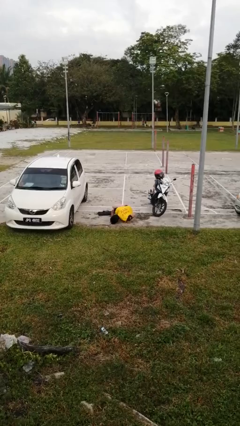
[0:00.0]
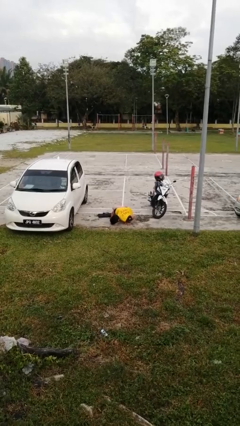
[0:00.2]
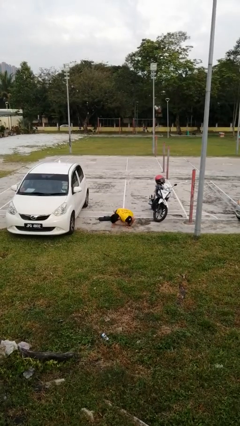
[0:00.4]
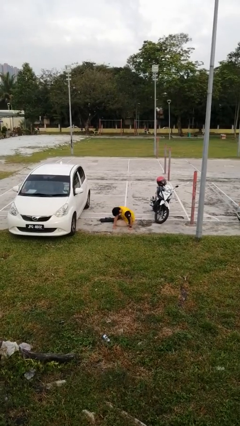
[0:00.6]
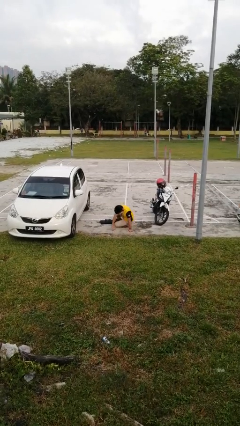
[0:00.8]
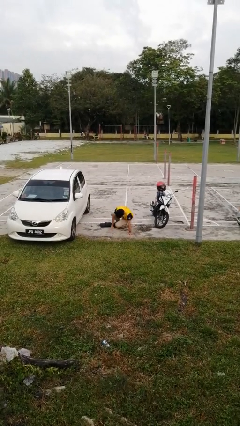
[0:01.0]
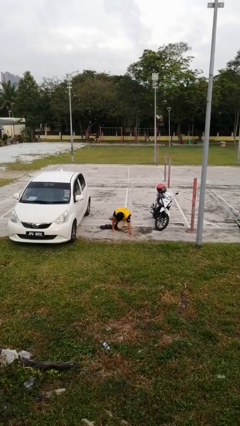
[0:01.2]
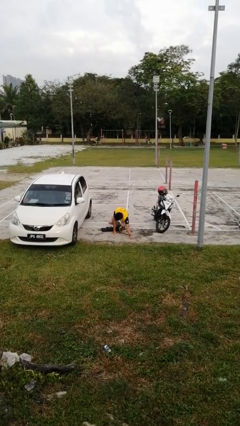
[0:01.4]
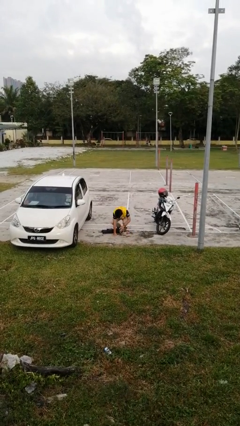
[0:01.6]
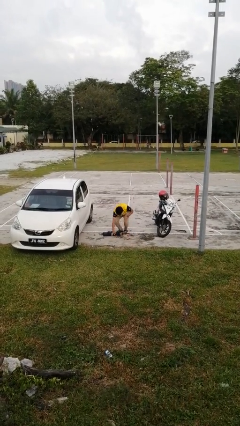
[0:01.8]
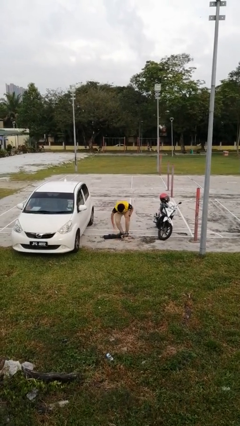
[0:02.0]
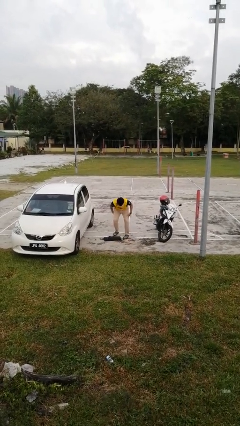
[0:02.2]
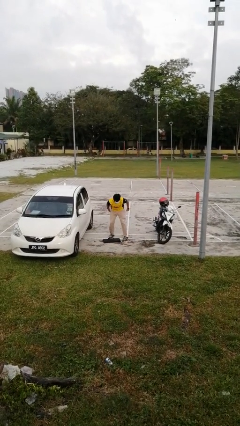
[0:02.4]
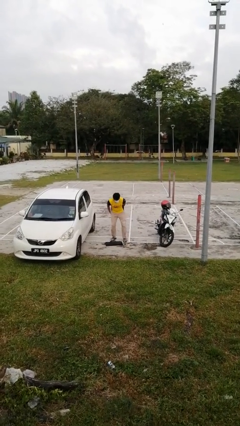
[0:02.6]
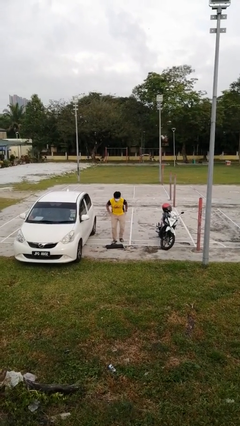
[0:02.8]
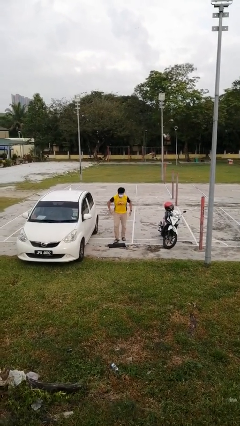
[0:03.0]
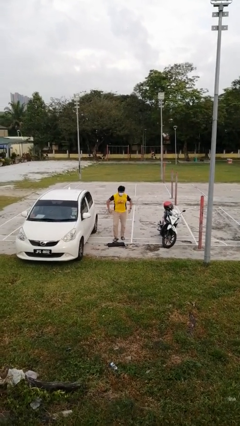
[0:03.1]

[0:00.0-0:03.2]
person stands up from floor

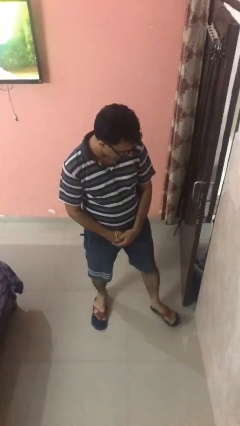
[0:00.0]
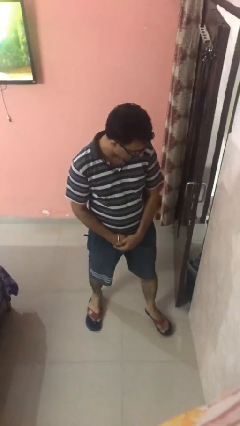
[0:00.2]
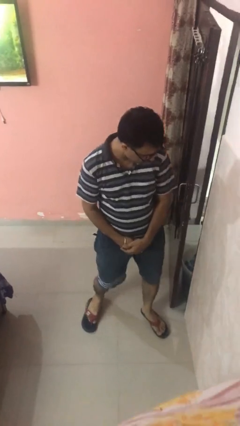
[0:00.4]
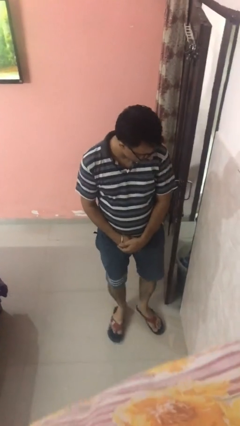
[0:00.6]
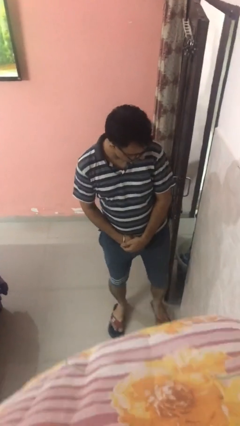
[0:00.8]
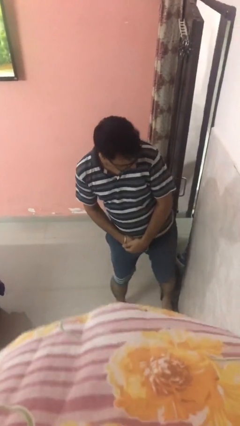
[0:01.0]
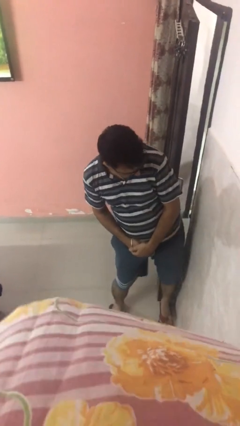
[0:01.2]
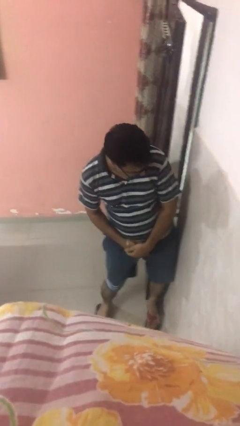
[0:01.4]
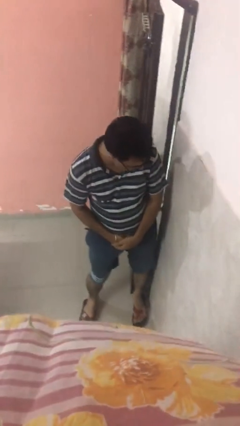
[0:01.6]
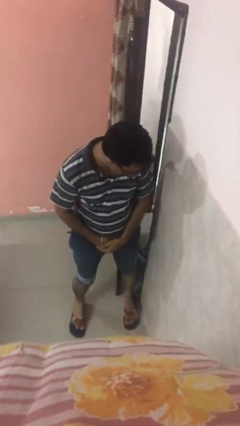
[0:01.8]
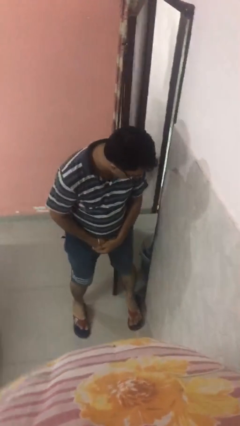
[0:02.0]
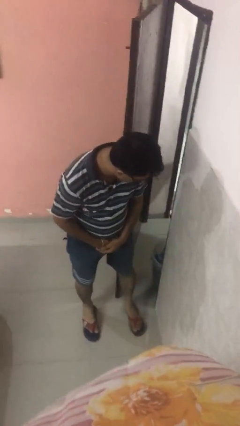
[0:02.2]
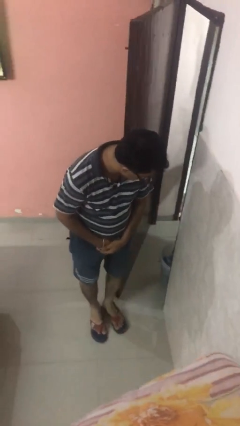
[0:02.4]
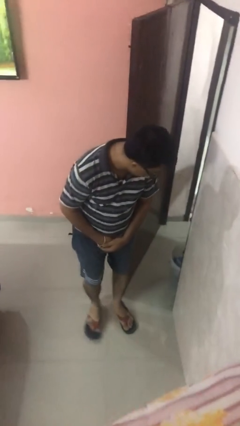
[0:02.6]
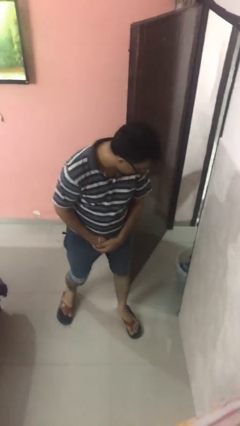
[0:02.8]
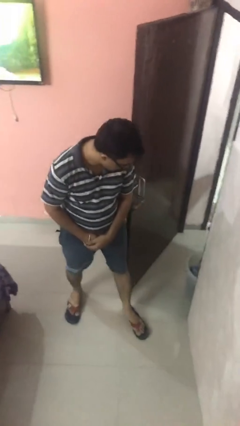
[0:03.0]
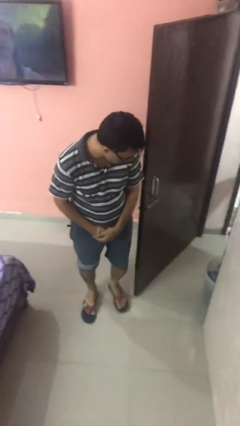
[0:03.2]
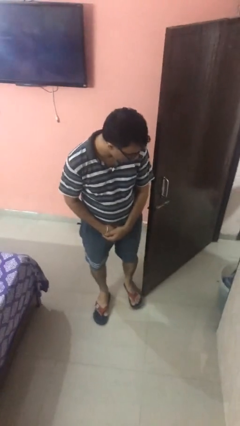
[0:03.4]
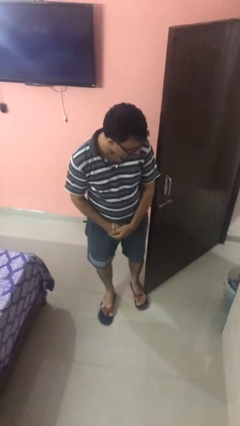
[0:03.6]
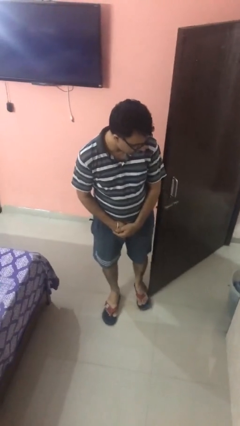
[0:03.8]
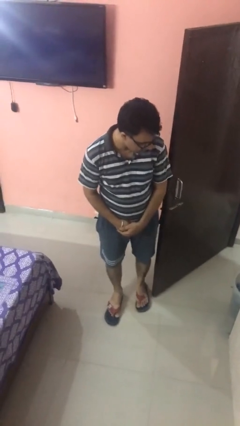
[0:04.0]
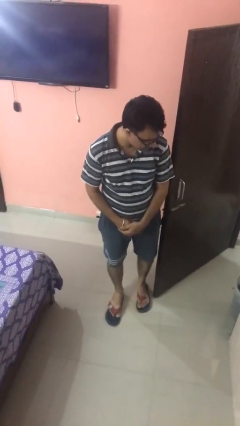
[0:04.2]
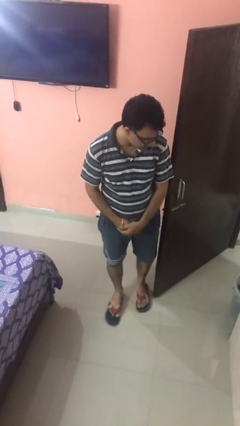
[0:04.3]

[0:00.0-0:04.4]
person opens facility door

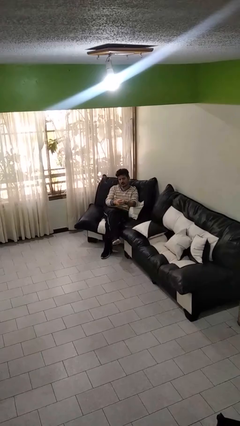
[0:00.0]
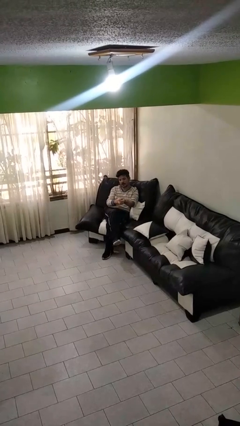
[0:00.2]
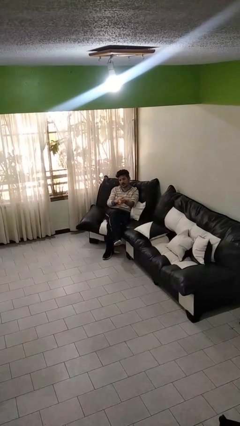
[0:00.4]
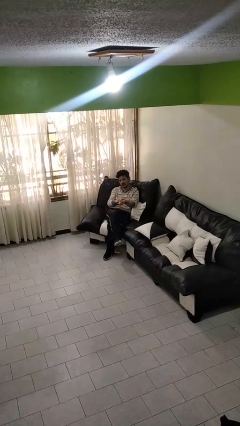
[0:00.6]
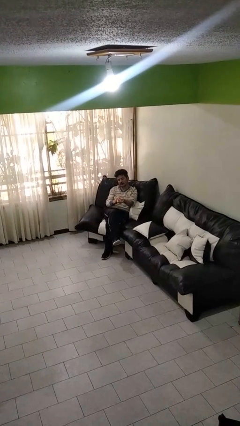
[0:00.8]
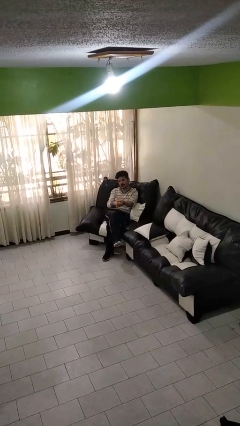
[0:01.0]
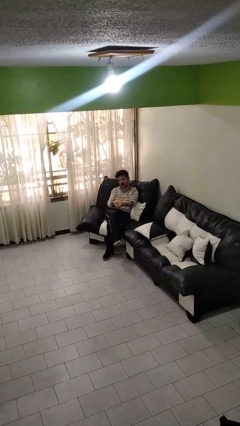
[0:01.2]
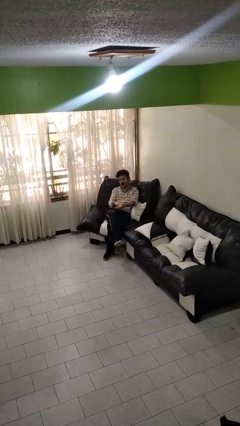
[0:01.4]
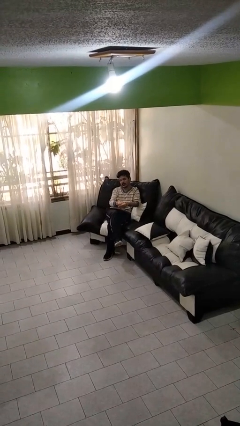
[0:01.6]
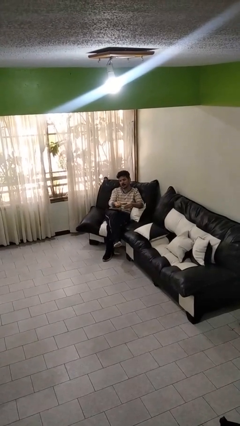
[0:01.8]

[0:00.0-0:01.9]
person takes off wristwatch

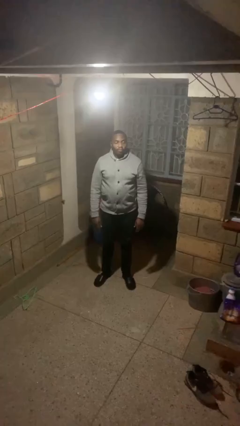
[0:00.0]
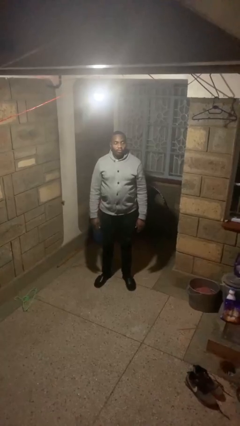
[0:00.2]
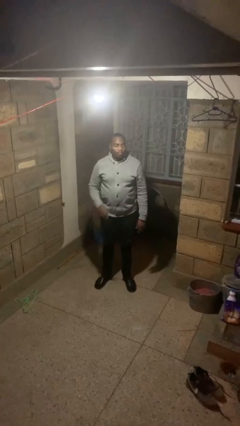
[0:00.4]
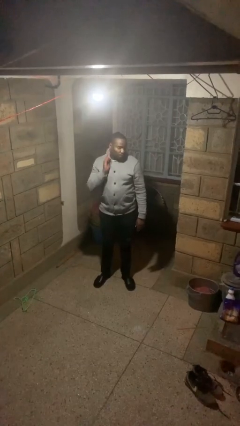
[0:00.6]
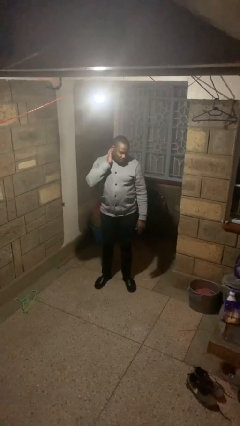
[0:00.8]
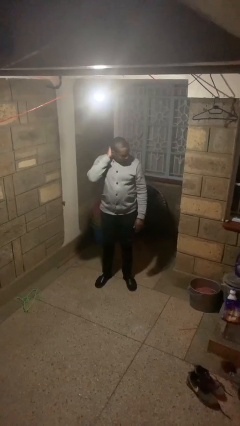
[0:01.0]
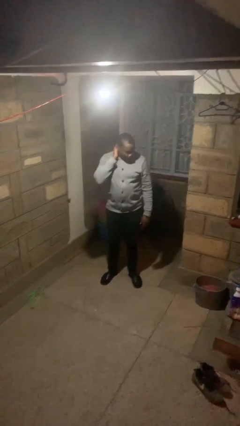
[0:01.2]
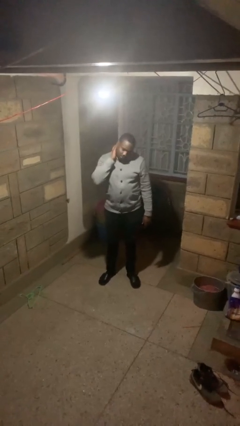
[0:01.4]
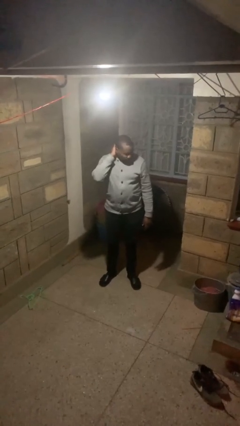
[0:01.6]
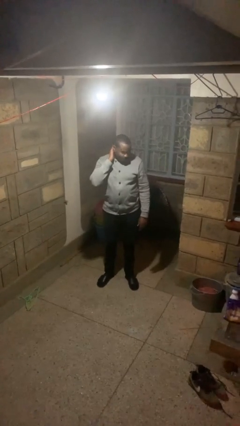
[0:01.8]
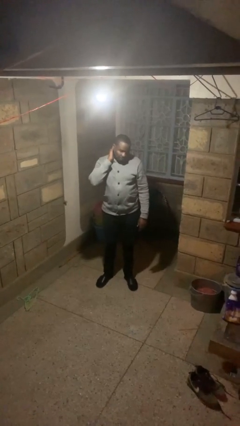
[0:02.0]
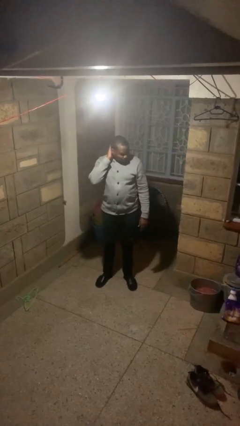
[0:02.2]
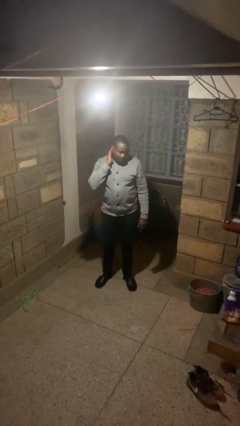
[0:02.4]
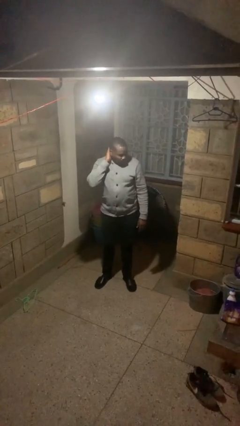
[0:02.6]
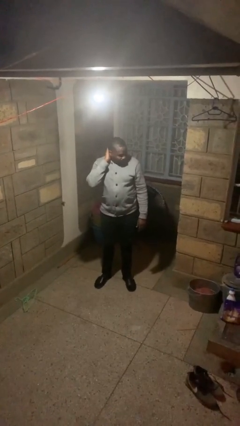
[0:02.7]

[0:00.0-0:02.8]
person rubs neck

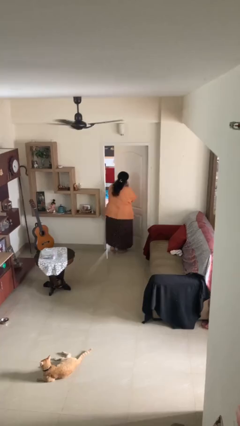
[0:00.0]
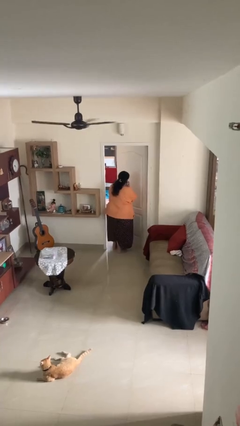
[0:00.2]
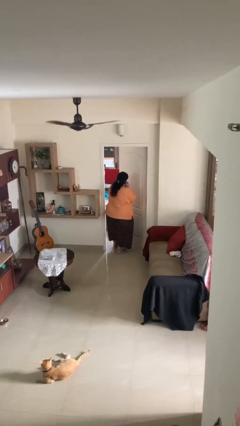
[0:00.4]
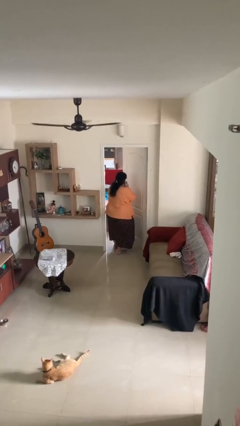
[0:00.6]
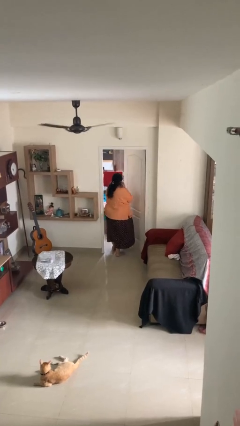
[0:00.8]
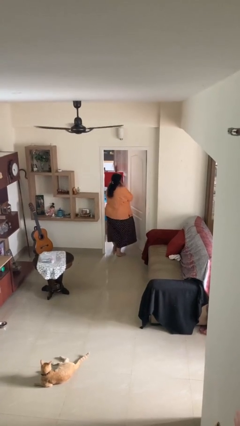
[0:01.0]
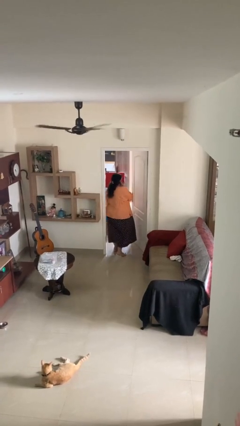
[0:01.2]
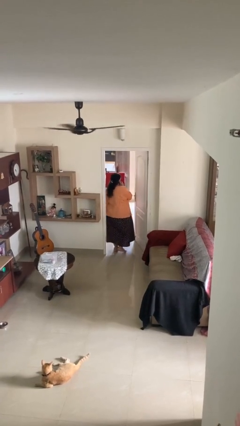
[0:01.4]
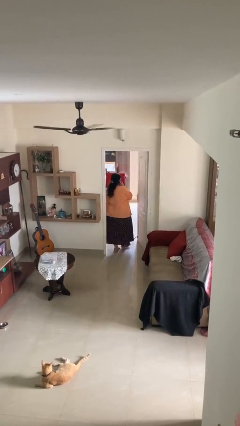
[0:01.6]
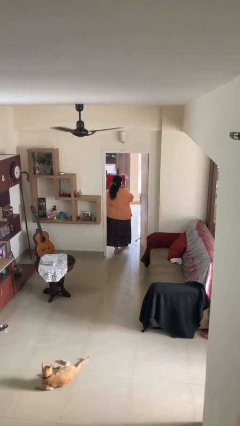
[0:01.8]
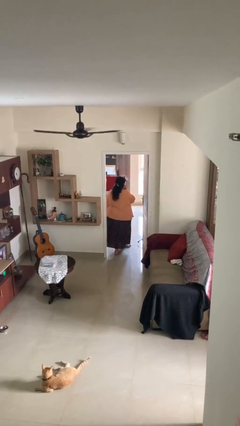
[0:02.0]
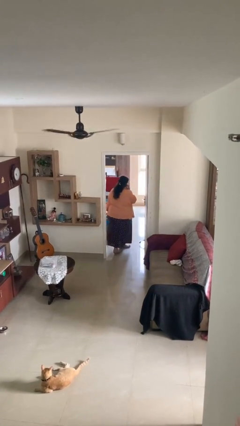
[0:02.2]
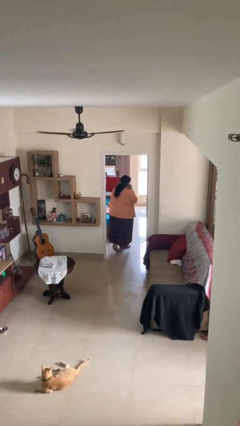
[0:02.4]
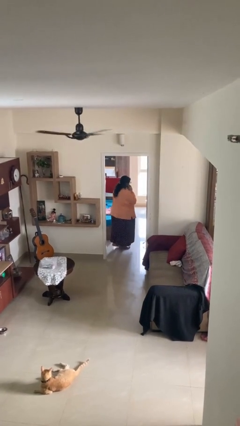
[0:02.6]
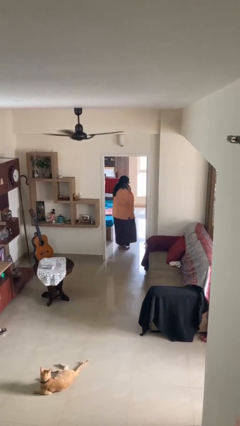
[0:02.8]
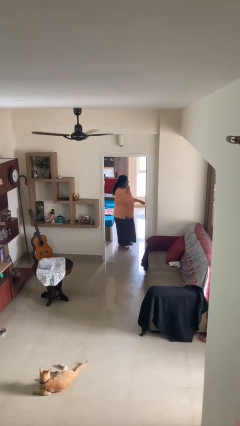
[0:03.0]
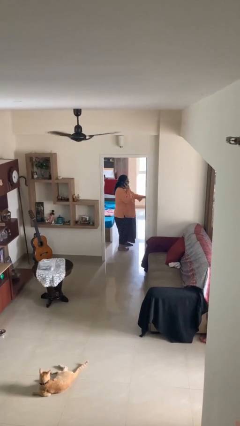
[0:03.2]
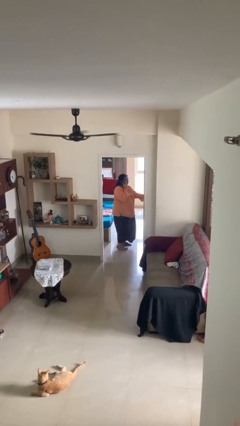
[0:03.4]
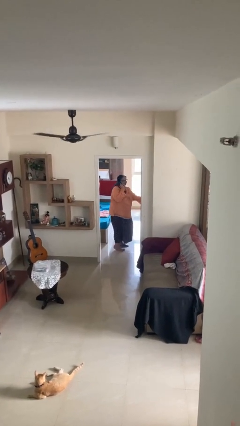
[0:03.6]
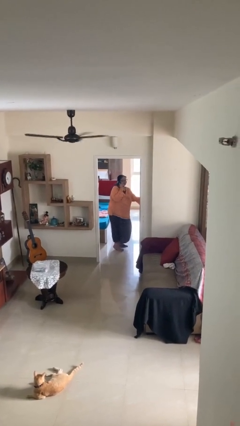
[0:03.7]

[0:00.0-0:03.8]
person exits scene through structure

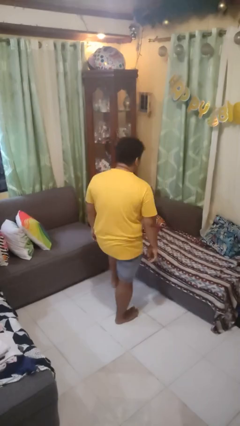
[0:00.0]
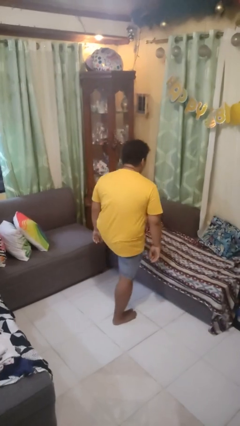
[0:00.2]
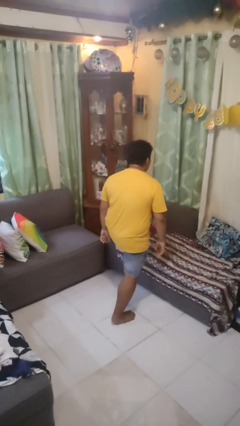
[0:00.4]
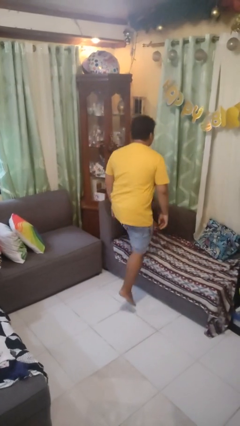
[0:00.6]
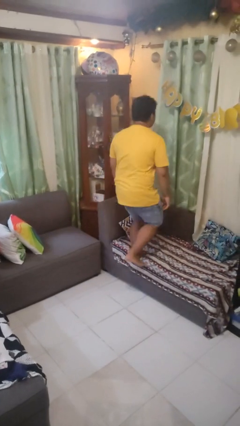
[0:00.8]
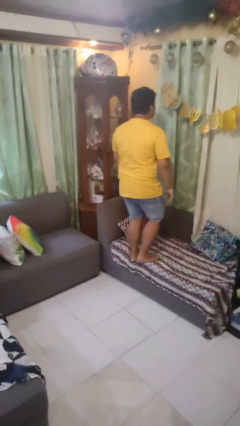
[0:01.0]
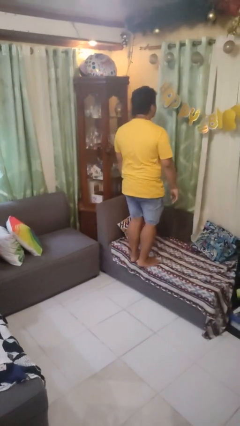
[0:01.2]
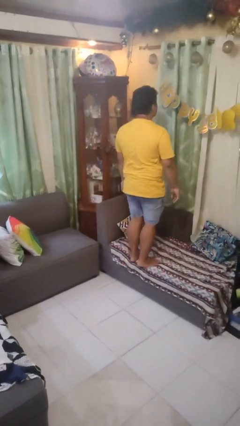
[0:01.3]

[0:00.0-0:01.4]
person climbs on couch

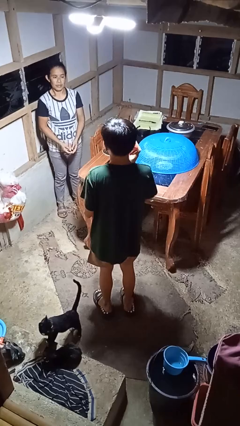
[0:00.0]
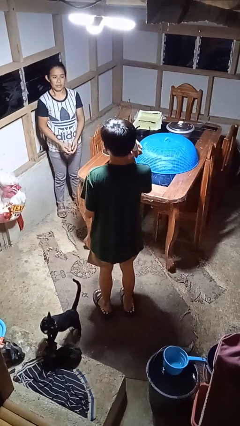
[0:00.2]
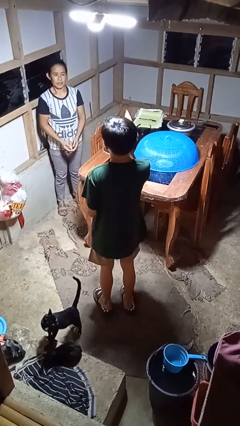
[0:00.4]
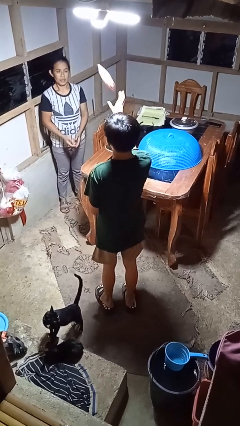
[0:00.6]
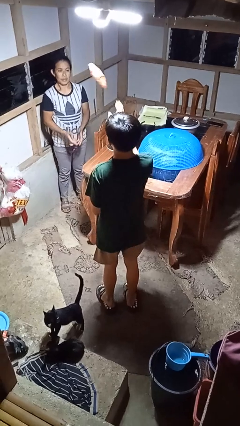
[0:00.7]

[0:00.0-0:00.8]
person throws object to person
